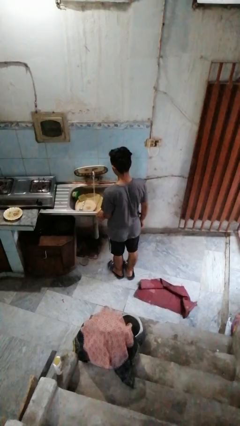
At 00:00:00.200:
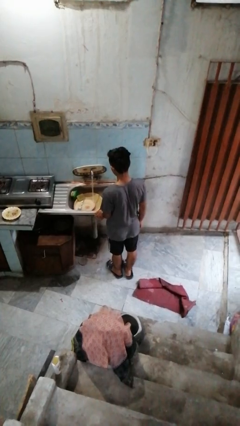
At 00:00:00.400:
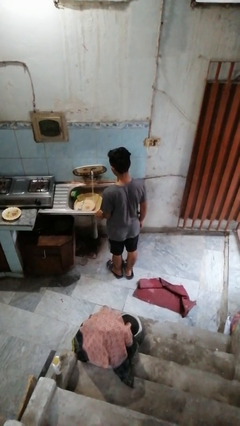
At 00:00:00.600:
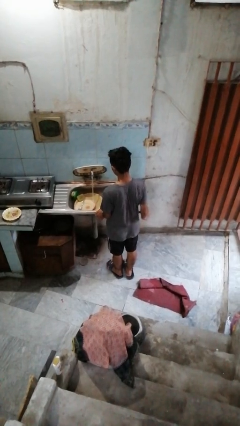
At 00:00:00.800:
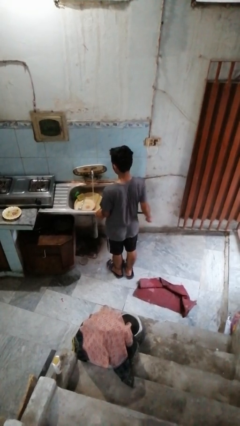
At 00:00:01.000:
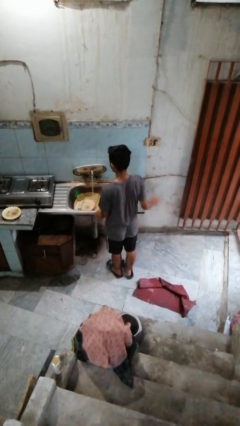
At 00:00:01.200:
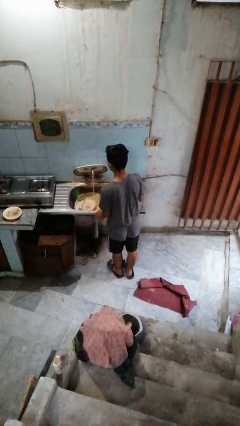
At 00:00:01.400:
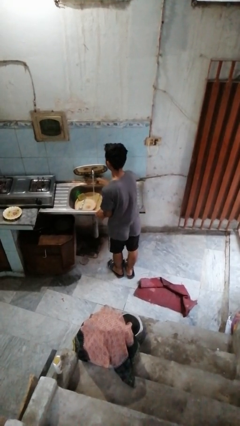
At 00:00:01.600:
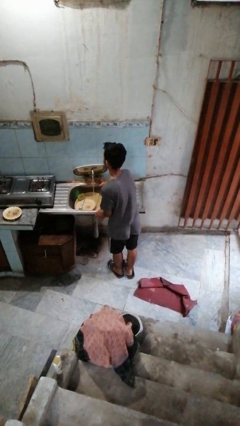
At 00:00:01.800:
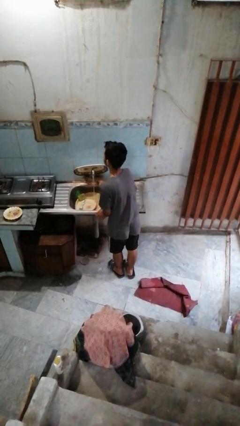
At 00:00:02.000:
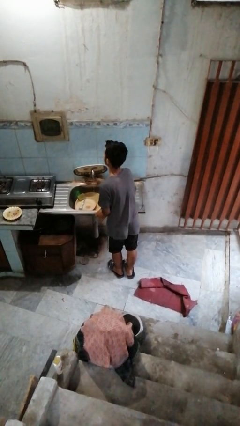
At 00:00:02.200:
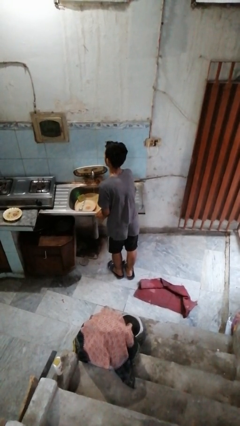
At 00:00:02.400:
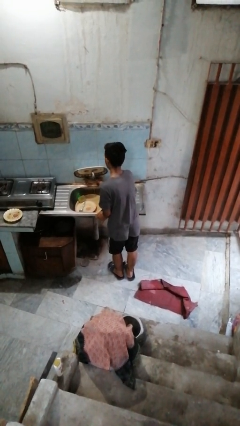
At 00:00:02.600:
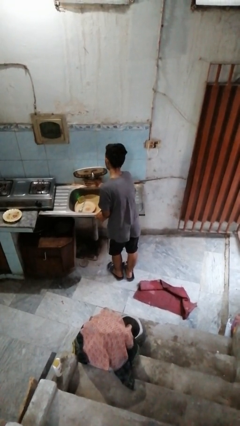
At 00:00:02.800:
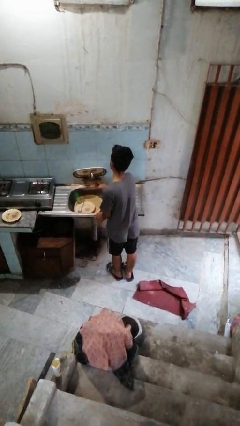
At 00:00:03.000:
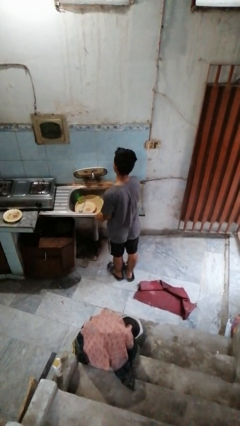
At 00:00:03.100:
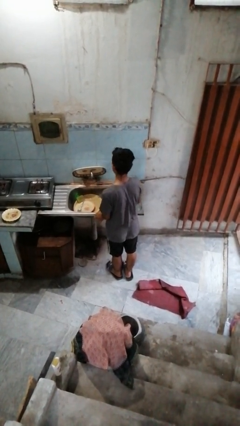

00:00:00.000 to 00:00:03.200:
person turns off faucet

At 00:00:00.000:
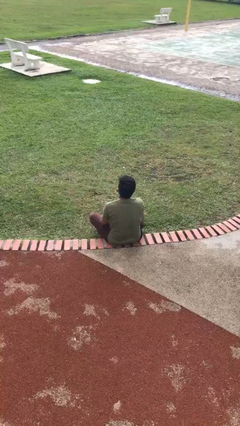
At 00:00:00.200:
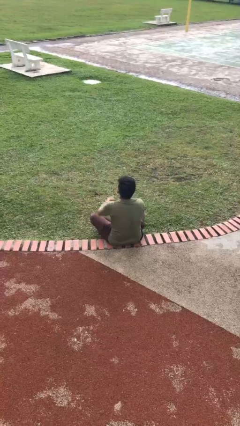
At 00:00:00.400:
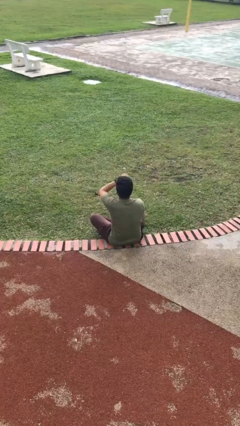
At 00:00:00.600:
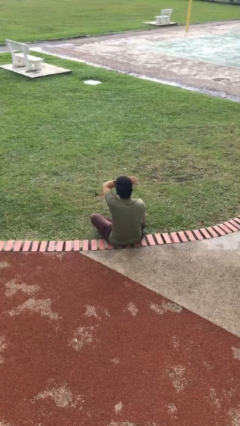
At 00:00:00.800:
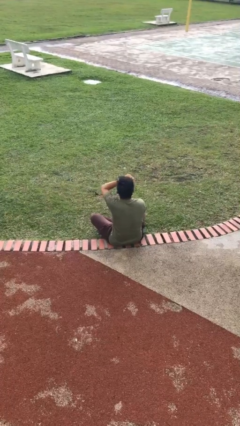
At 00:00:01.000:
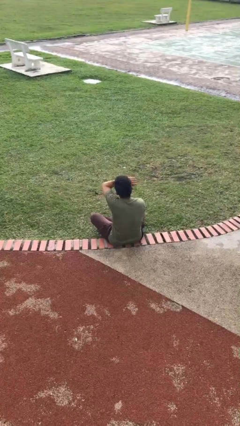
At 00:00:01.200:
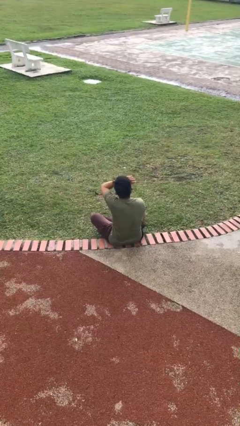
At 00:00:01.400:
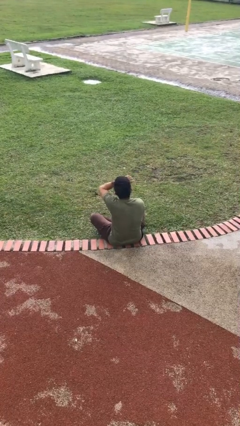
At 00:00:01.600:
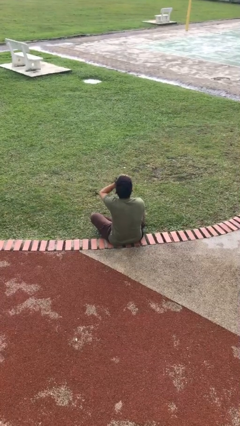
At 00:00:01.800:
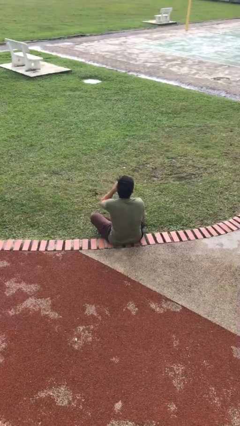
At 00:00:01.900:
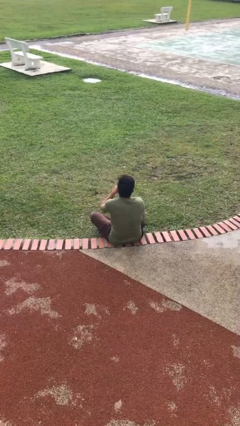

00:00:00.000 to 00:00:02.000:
person rubs eyes

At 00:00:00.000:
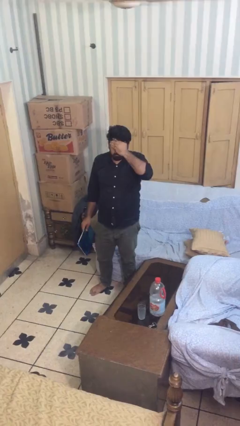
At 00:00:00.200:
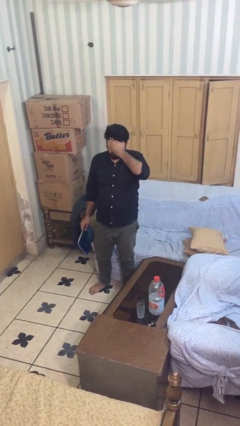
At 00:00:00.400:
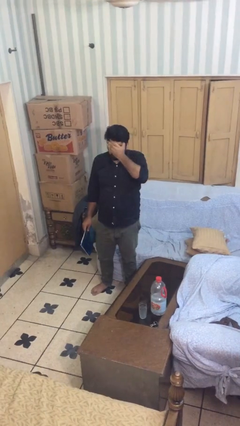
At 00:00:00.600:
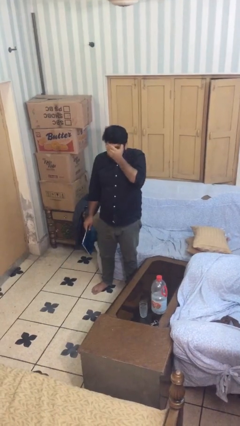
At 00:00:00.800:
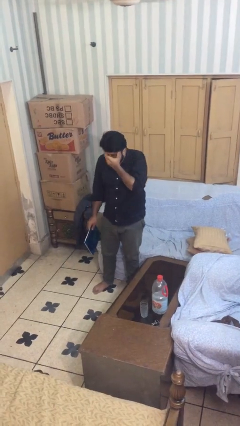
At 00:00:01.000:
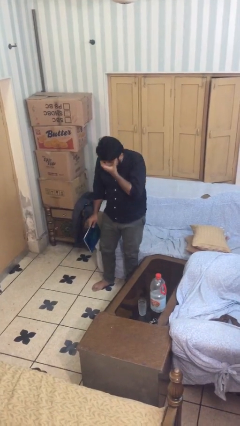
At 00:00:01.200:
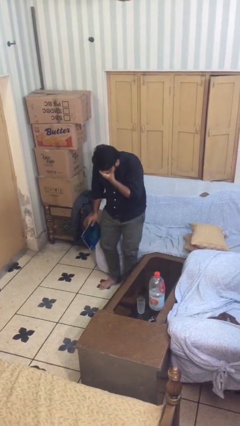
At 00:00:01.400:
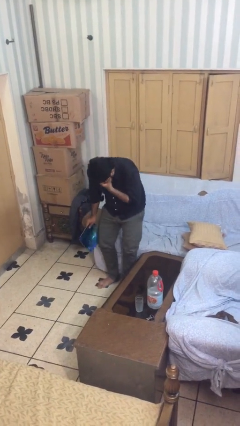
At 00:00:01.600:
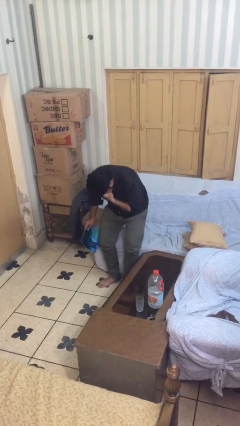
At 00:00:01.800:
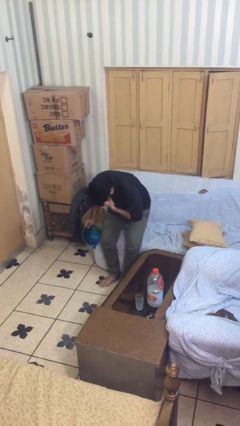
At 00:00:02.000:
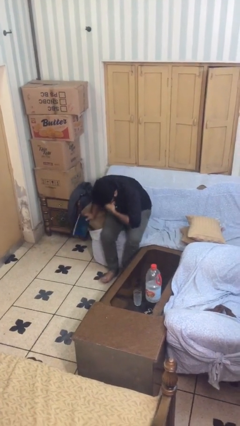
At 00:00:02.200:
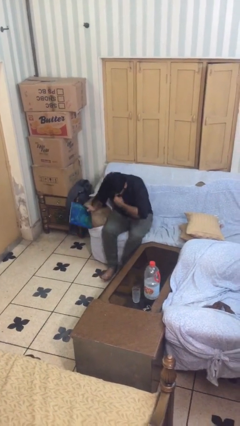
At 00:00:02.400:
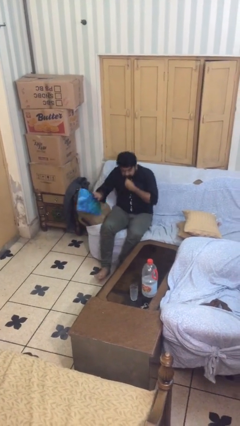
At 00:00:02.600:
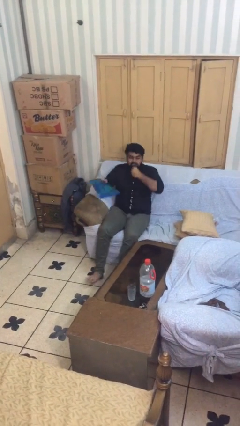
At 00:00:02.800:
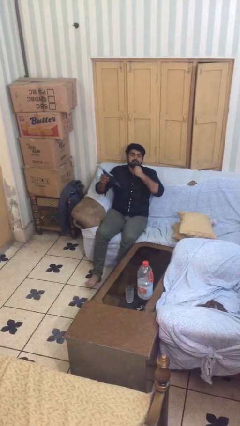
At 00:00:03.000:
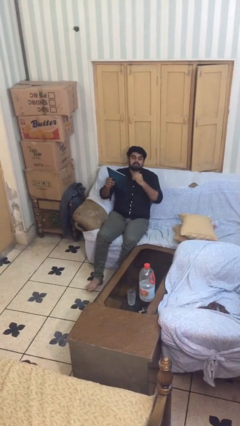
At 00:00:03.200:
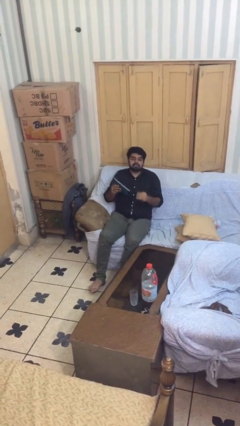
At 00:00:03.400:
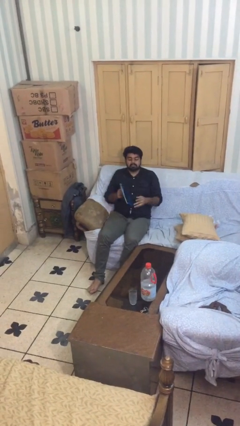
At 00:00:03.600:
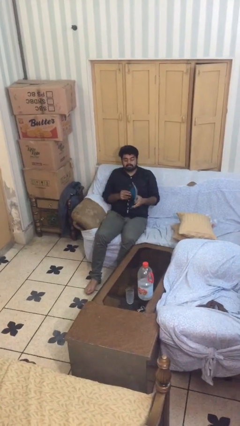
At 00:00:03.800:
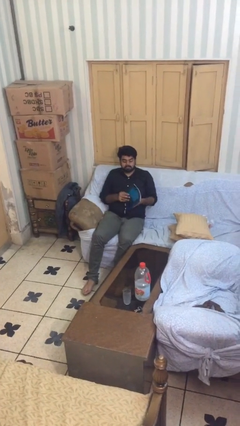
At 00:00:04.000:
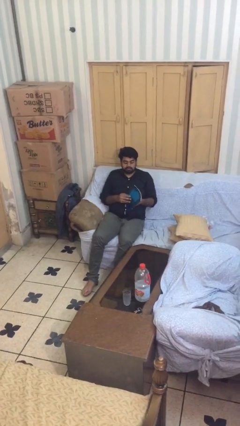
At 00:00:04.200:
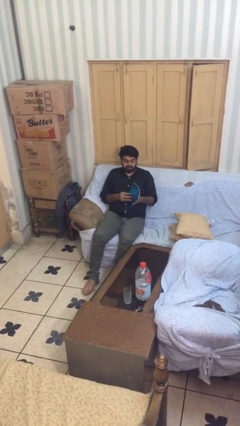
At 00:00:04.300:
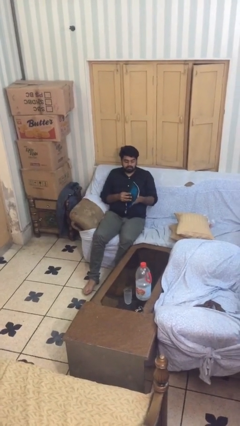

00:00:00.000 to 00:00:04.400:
person sits down

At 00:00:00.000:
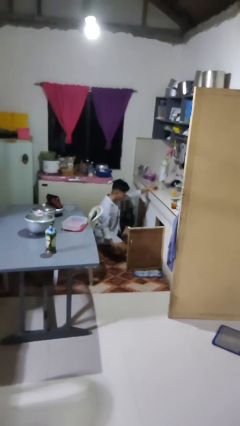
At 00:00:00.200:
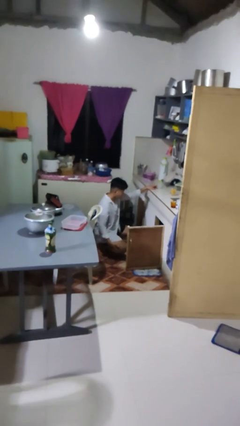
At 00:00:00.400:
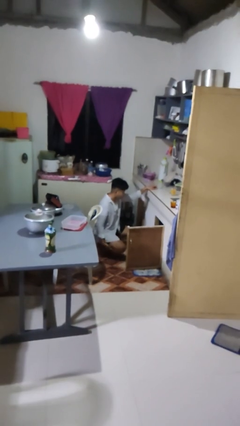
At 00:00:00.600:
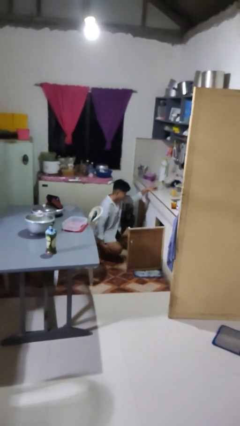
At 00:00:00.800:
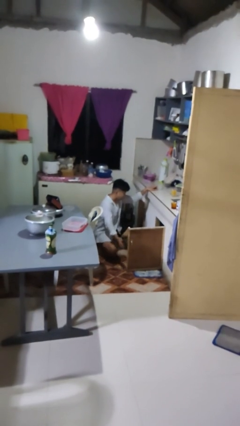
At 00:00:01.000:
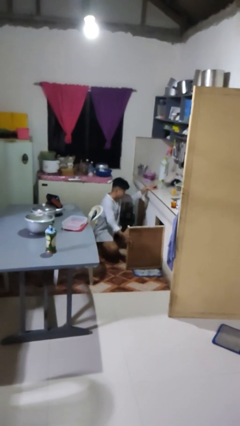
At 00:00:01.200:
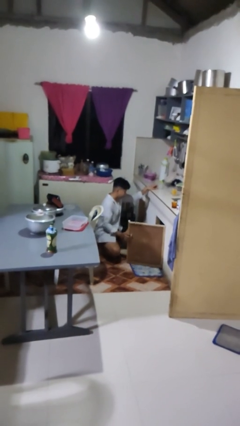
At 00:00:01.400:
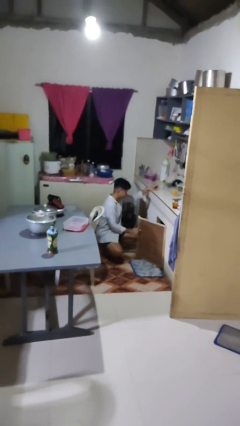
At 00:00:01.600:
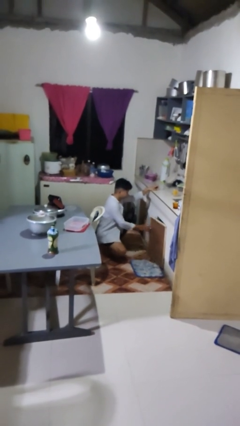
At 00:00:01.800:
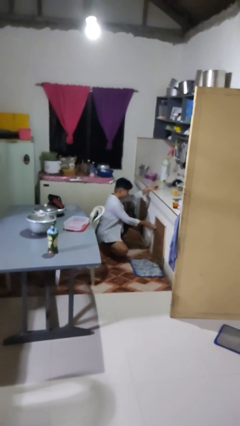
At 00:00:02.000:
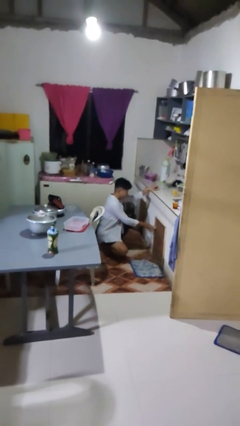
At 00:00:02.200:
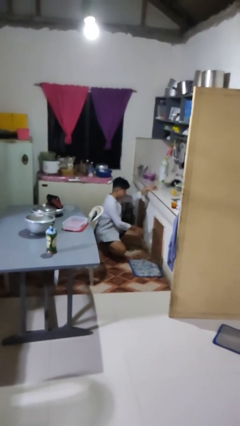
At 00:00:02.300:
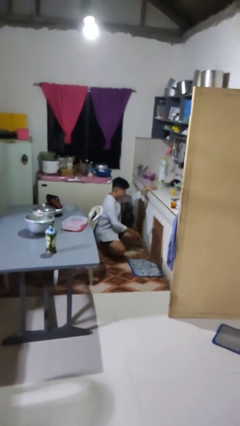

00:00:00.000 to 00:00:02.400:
person closes cabinet

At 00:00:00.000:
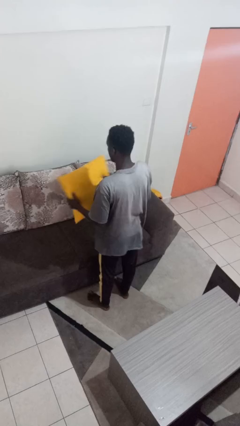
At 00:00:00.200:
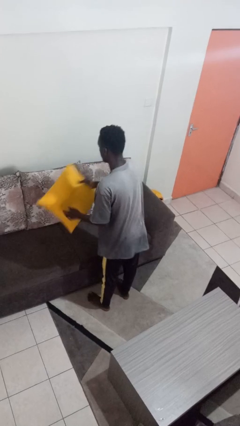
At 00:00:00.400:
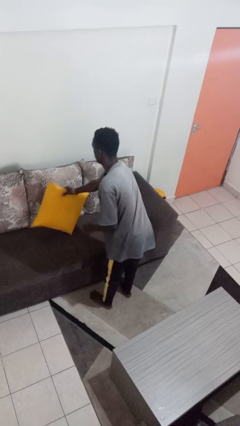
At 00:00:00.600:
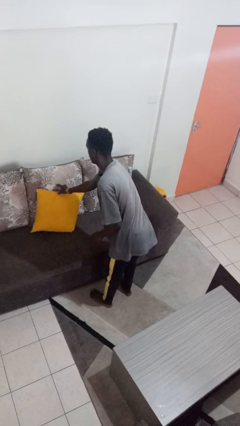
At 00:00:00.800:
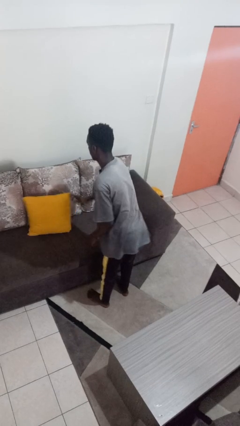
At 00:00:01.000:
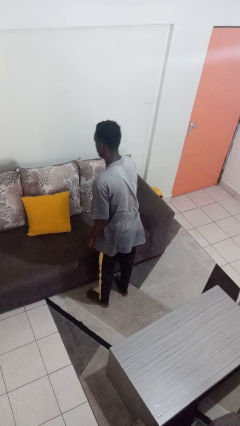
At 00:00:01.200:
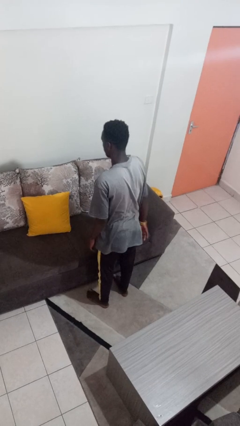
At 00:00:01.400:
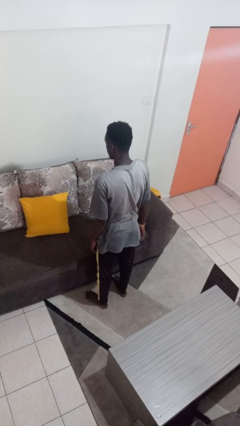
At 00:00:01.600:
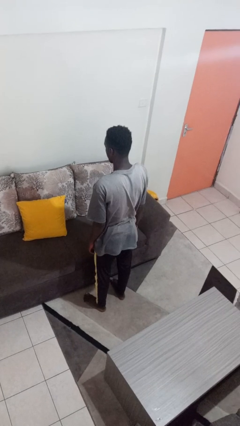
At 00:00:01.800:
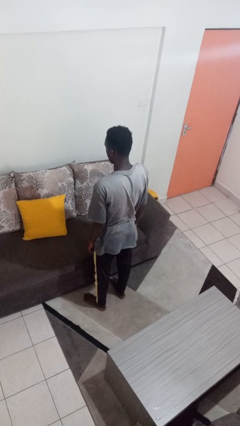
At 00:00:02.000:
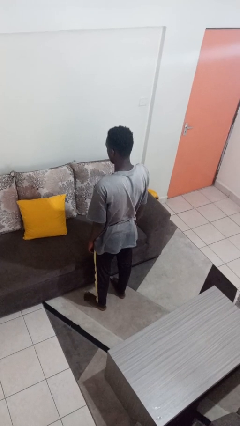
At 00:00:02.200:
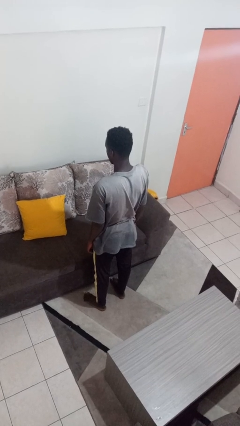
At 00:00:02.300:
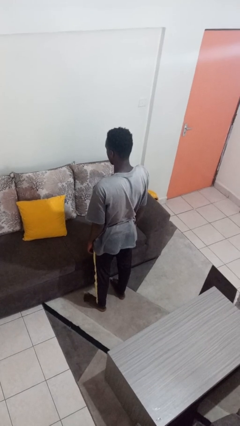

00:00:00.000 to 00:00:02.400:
person puts down object on couch

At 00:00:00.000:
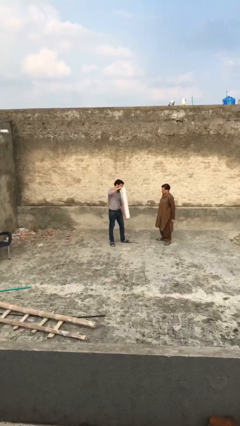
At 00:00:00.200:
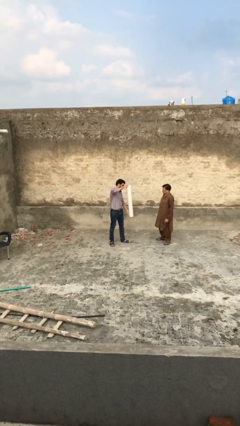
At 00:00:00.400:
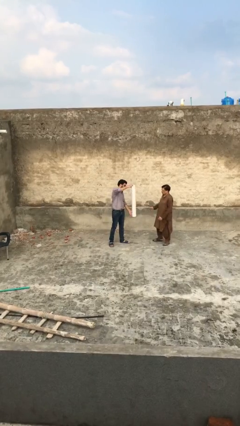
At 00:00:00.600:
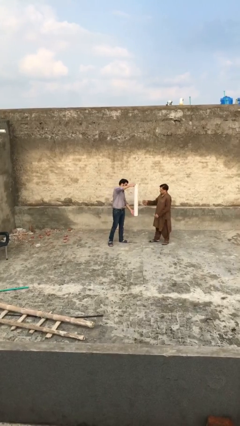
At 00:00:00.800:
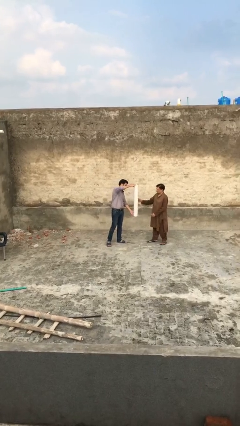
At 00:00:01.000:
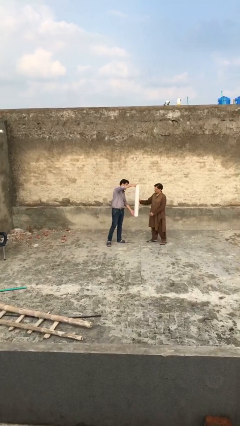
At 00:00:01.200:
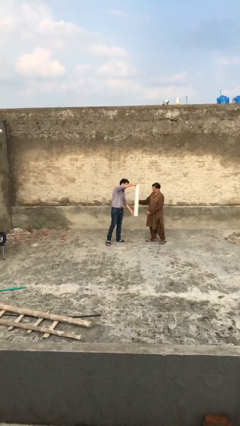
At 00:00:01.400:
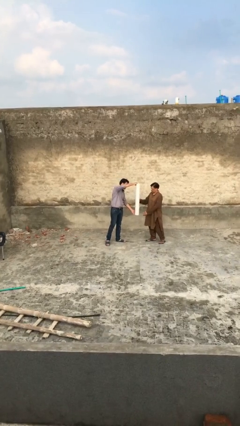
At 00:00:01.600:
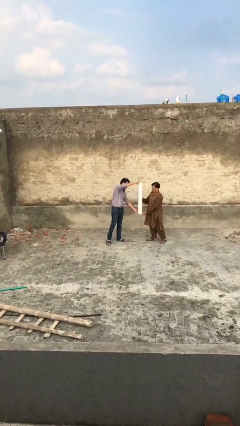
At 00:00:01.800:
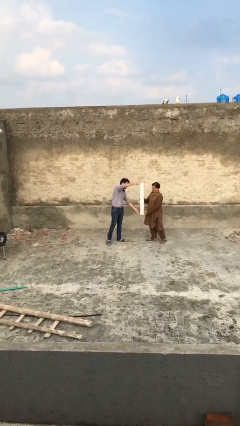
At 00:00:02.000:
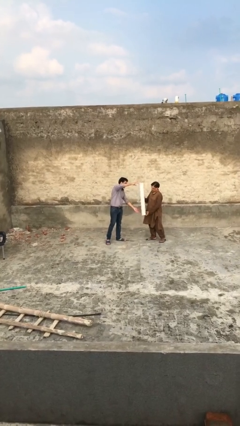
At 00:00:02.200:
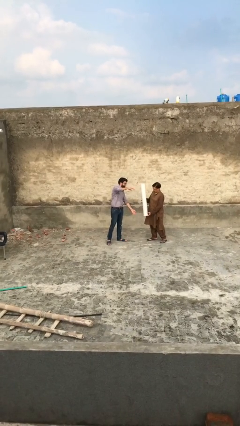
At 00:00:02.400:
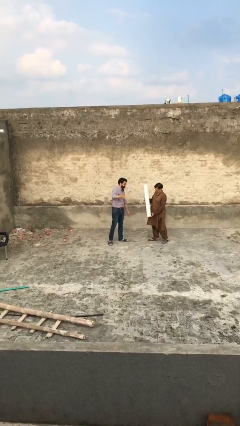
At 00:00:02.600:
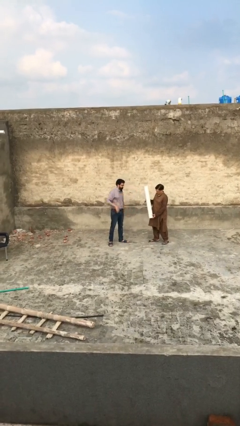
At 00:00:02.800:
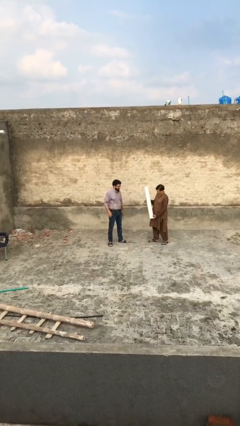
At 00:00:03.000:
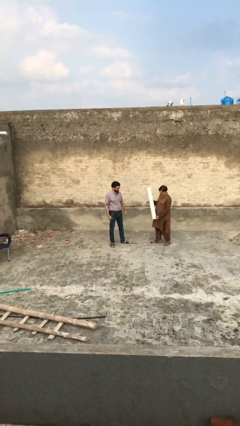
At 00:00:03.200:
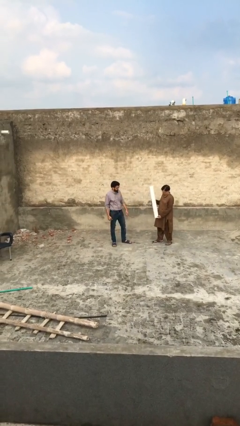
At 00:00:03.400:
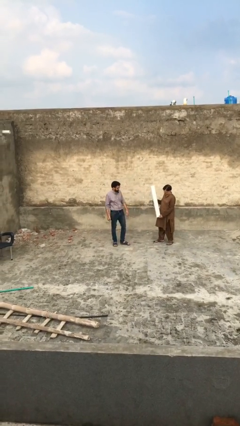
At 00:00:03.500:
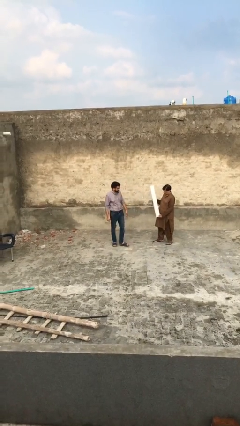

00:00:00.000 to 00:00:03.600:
person transfers object to person
